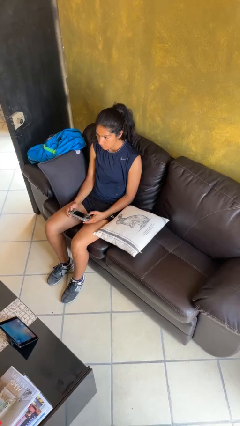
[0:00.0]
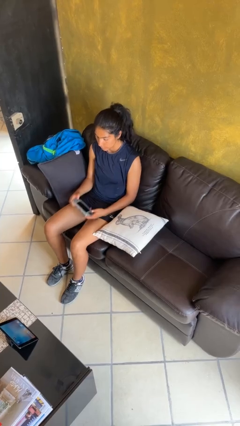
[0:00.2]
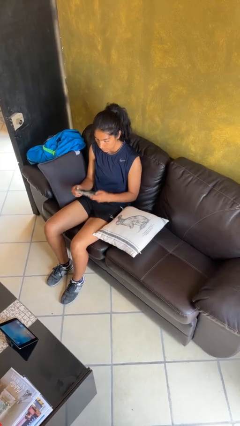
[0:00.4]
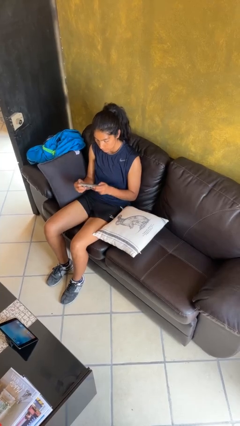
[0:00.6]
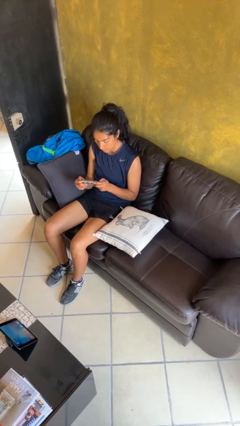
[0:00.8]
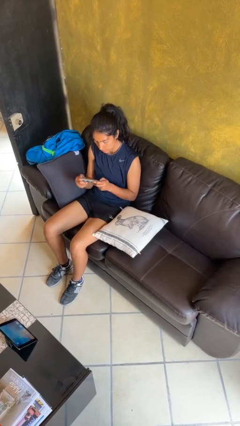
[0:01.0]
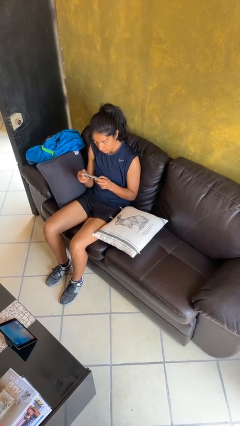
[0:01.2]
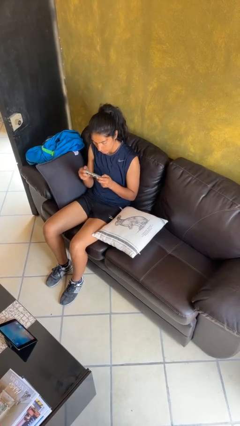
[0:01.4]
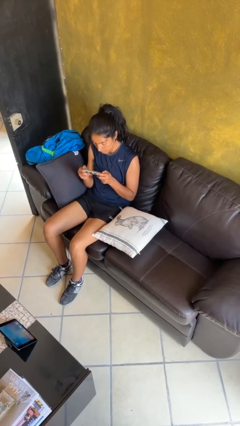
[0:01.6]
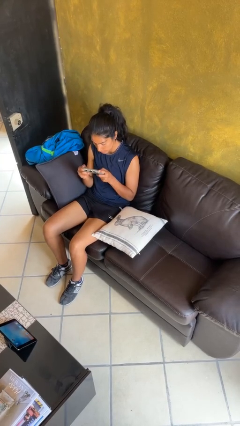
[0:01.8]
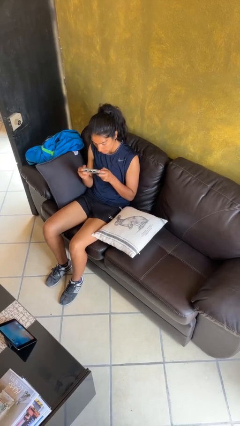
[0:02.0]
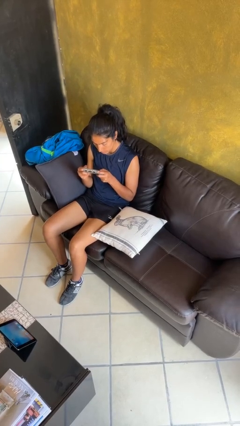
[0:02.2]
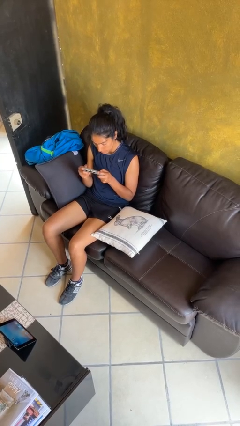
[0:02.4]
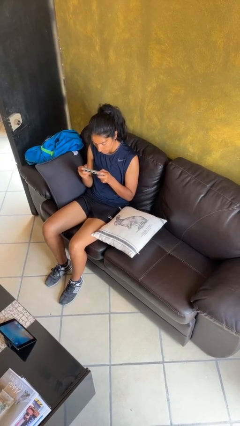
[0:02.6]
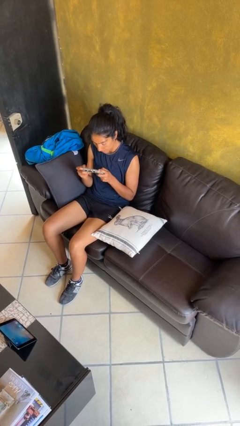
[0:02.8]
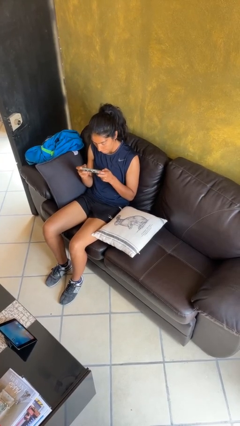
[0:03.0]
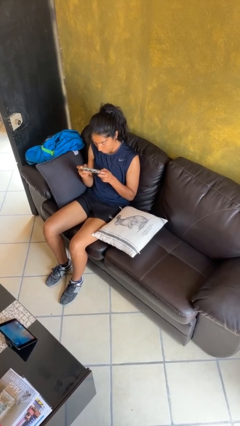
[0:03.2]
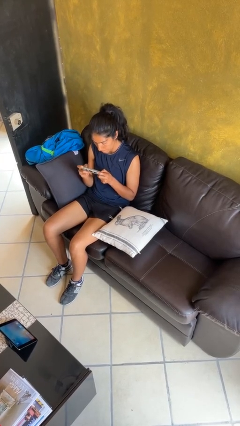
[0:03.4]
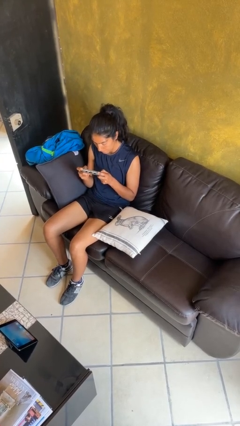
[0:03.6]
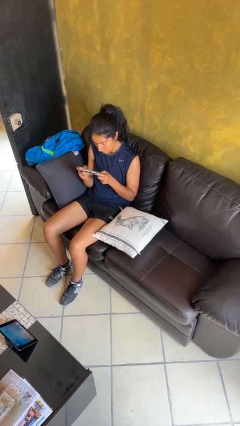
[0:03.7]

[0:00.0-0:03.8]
person interacts with handheld game

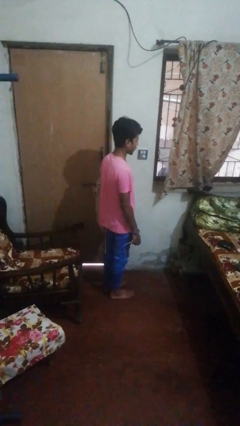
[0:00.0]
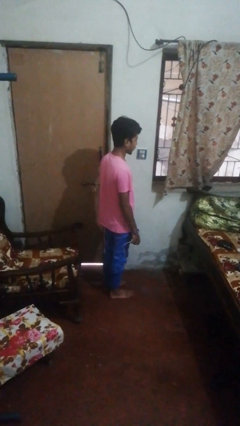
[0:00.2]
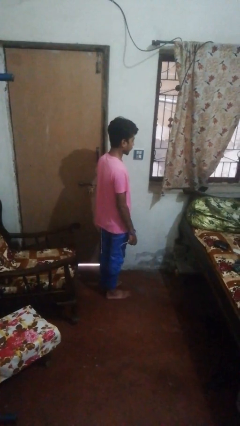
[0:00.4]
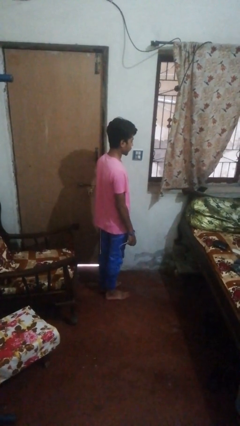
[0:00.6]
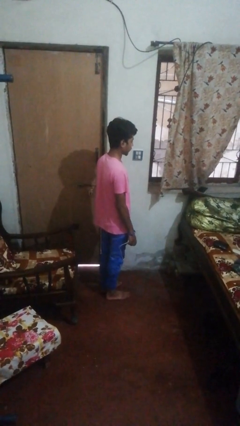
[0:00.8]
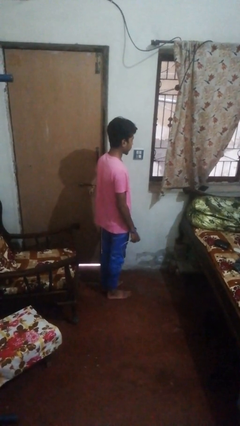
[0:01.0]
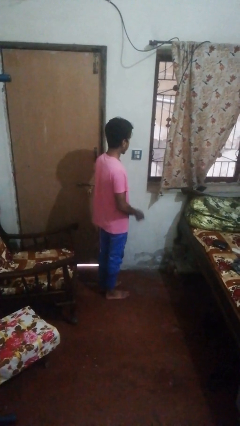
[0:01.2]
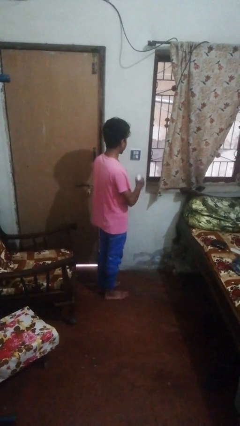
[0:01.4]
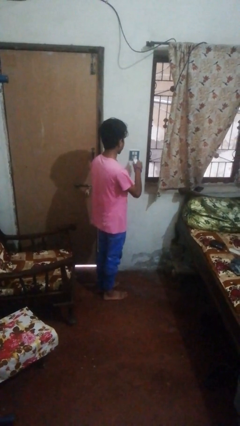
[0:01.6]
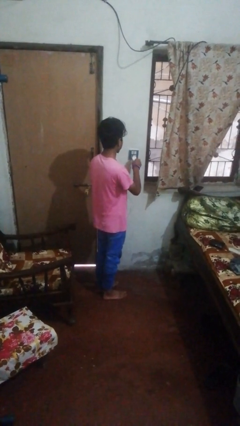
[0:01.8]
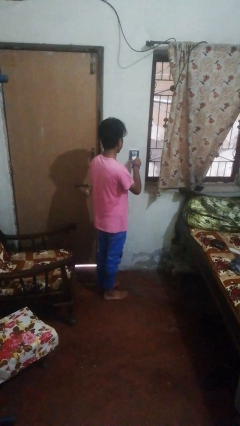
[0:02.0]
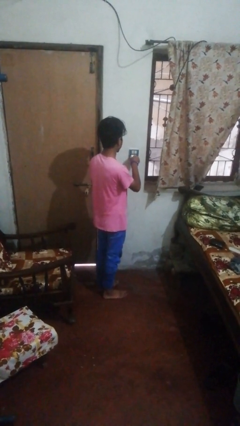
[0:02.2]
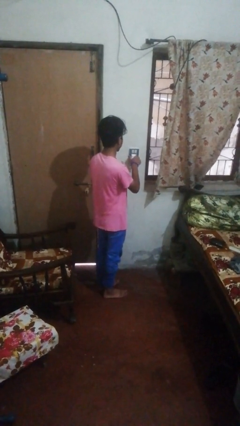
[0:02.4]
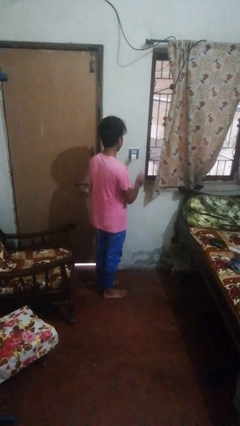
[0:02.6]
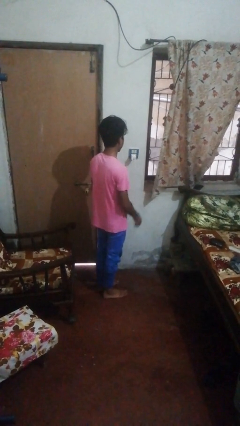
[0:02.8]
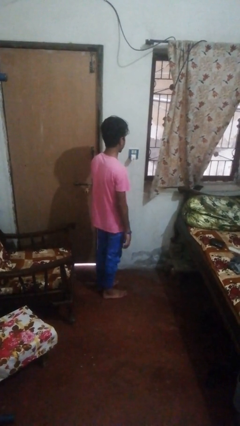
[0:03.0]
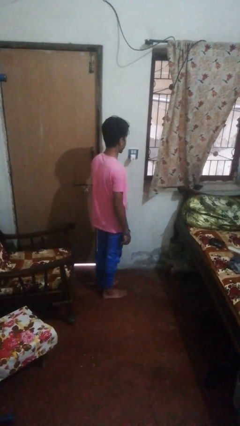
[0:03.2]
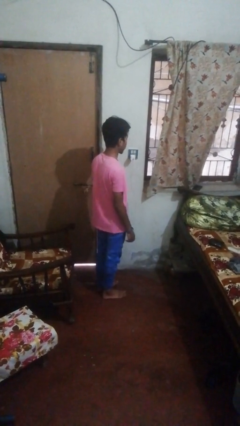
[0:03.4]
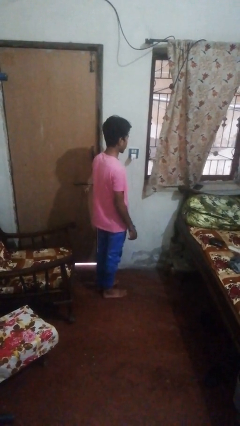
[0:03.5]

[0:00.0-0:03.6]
person plugs into electrical socket

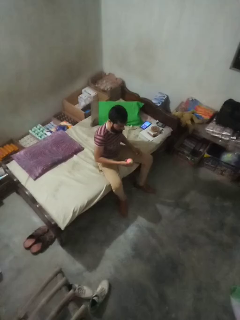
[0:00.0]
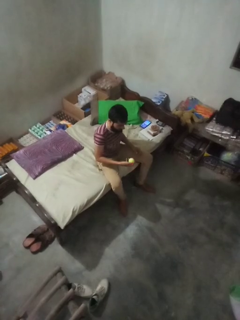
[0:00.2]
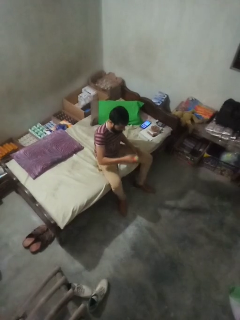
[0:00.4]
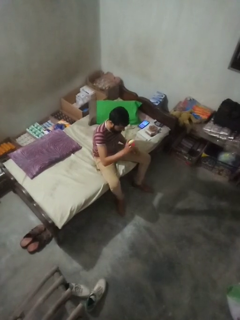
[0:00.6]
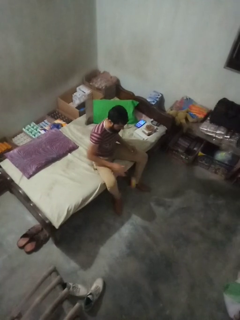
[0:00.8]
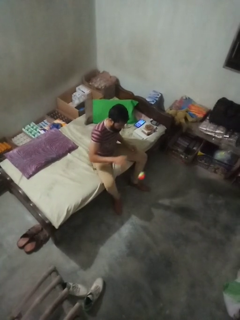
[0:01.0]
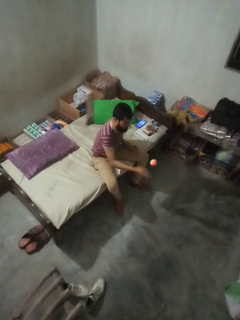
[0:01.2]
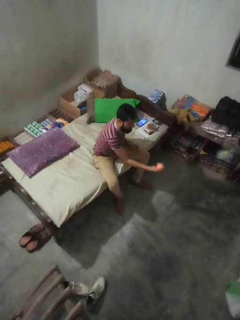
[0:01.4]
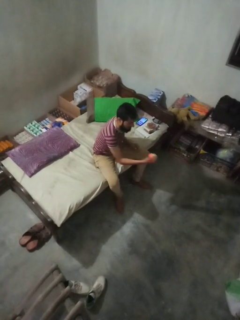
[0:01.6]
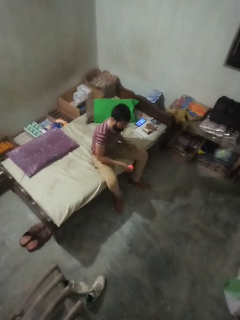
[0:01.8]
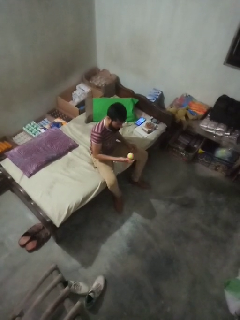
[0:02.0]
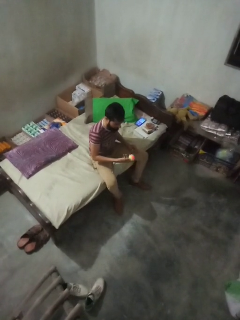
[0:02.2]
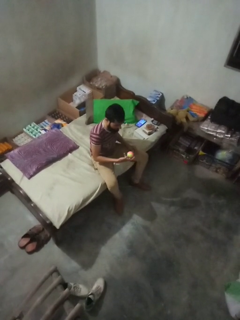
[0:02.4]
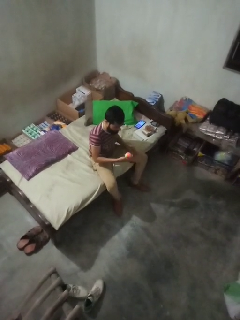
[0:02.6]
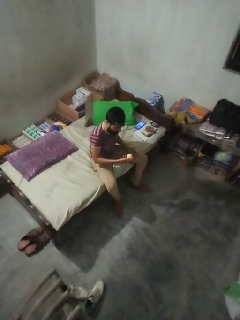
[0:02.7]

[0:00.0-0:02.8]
person bounces ball on floor

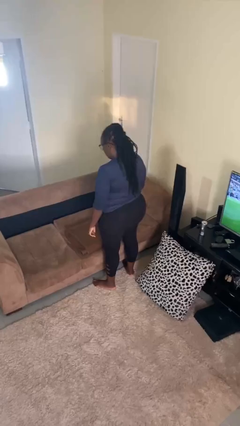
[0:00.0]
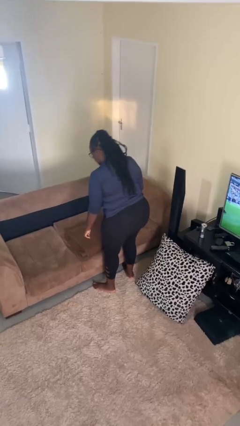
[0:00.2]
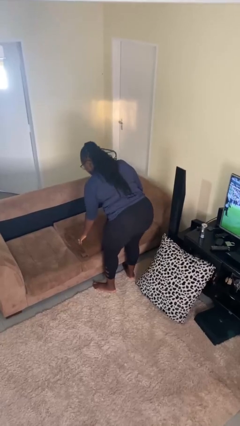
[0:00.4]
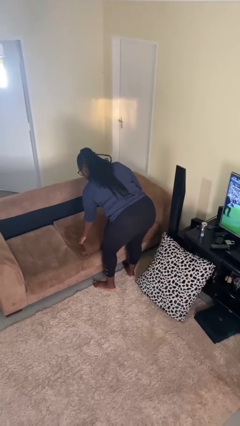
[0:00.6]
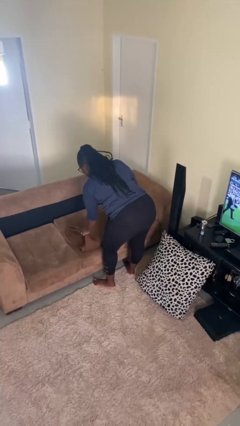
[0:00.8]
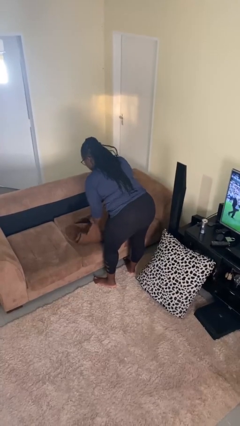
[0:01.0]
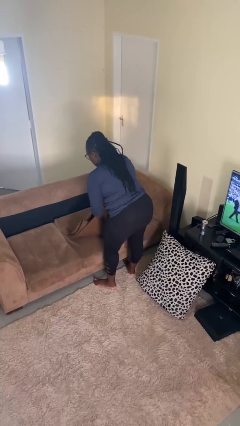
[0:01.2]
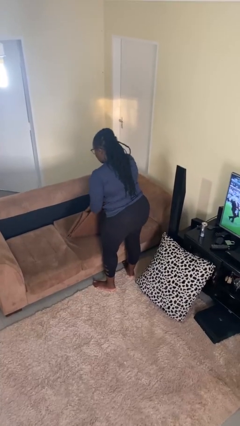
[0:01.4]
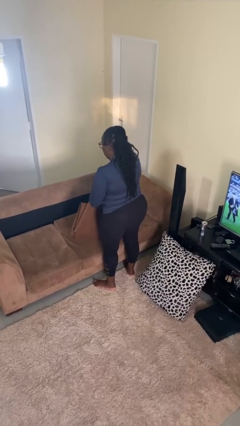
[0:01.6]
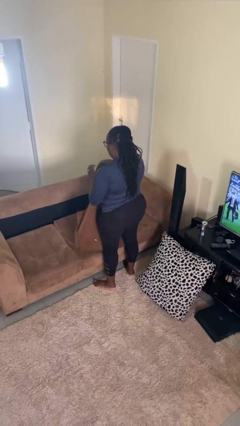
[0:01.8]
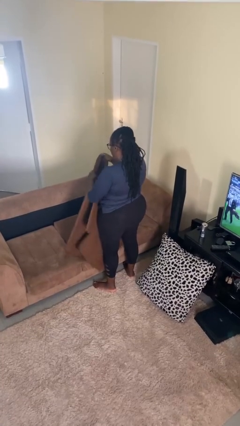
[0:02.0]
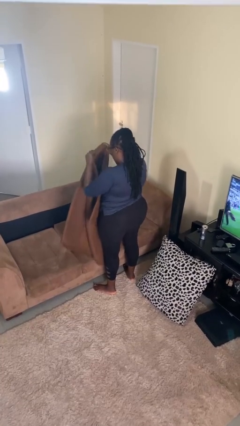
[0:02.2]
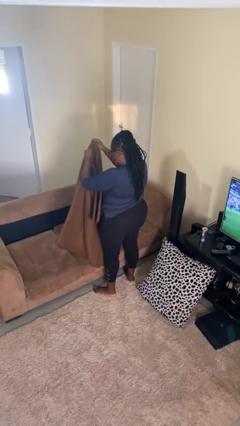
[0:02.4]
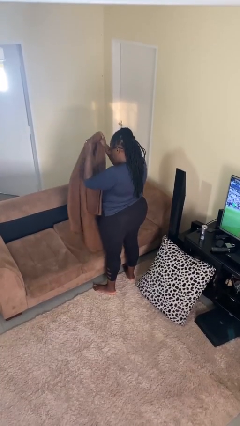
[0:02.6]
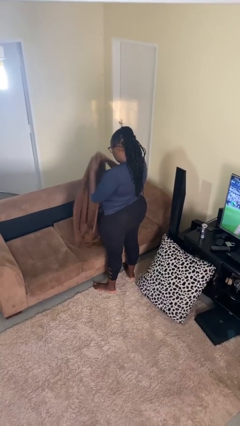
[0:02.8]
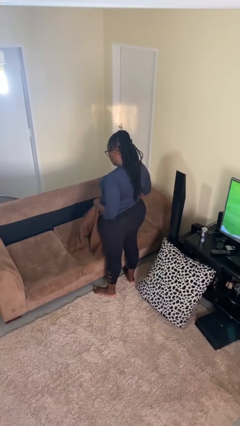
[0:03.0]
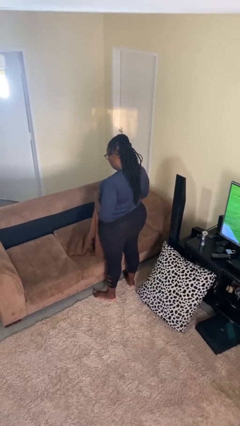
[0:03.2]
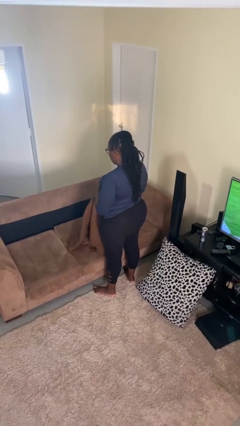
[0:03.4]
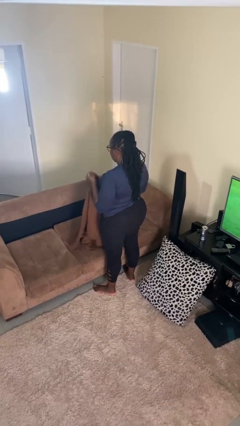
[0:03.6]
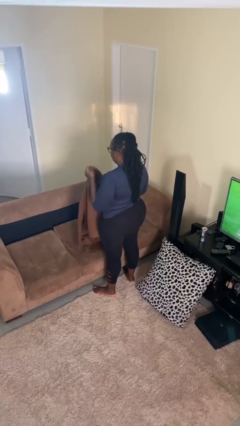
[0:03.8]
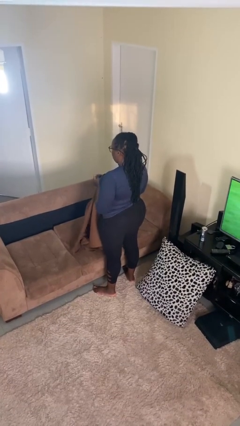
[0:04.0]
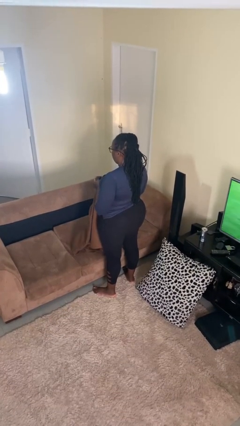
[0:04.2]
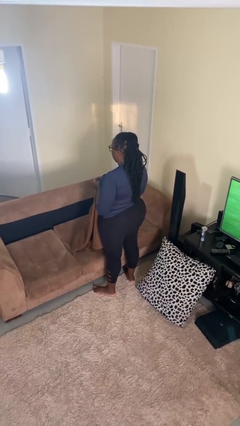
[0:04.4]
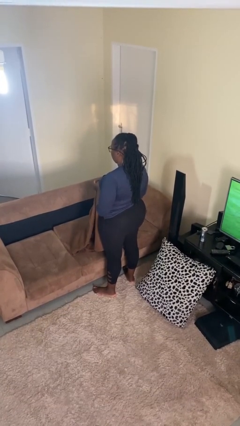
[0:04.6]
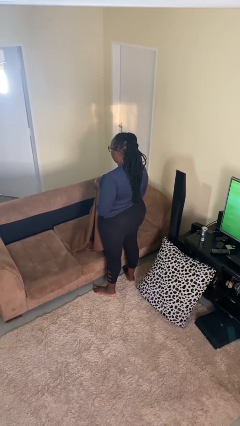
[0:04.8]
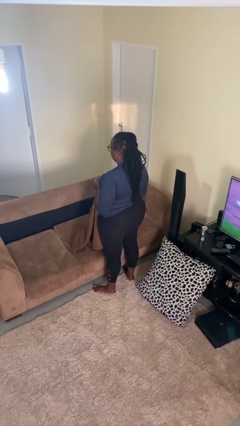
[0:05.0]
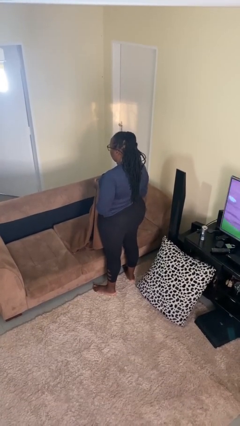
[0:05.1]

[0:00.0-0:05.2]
person unfolds blanket

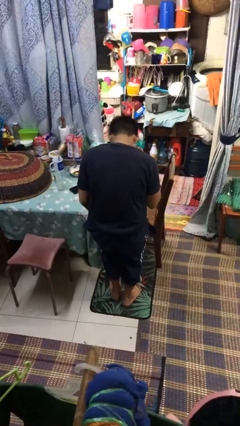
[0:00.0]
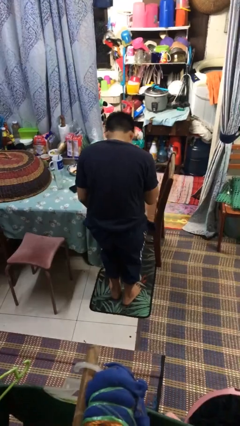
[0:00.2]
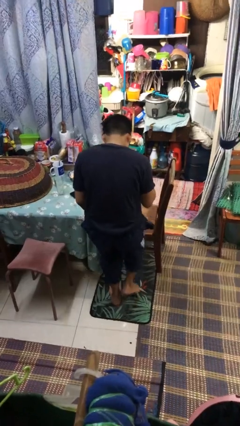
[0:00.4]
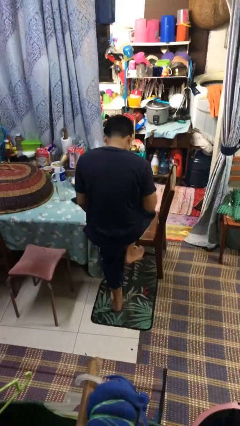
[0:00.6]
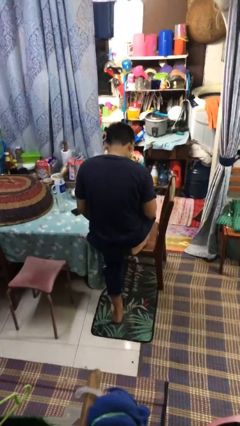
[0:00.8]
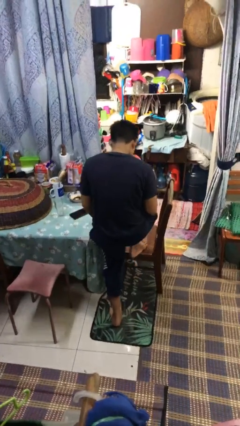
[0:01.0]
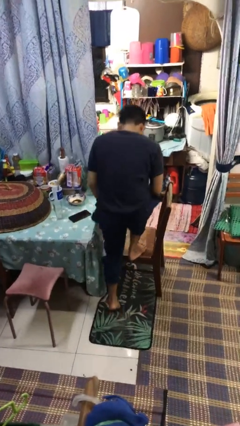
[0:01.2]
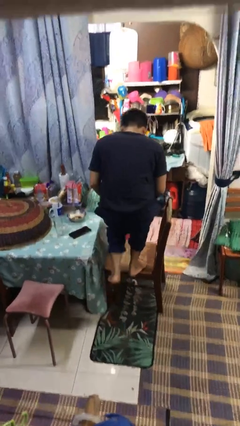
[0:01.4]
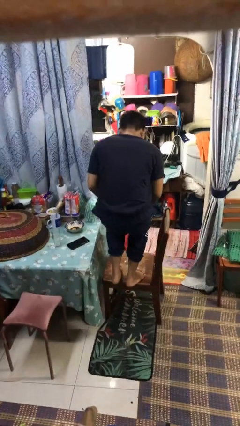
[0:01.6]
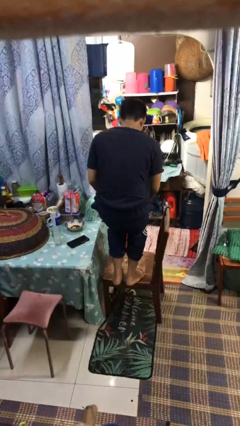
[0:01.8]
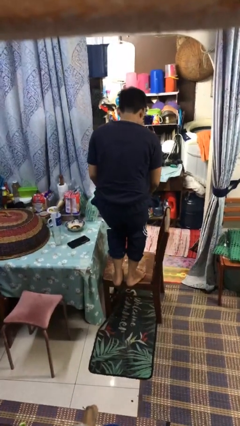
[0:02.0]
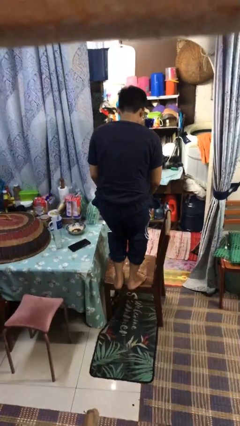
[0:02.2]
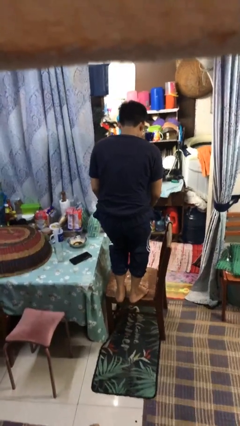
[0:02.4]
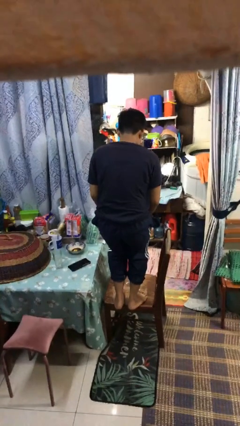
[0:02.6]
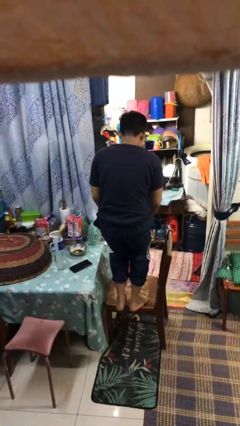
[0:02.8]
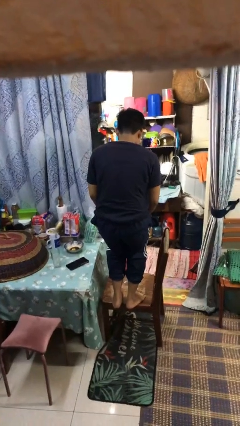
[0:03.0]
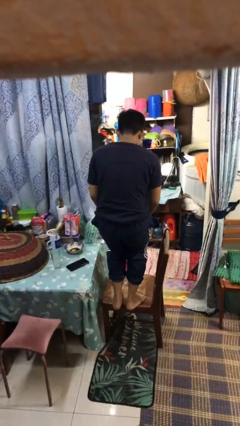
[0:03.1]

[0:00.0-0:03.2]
person climbs on chair
